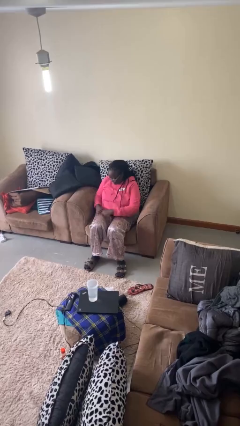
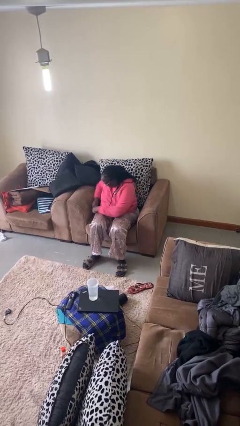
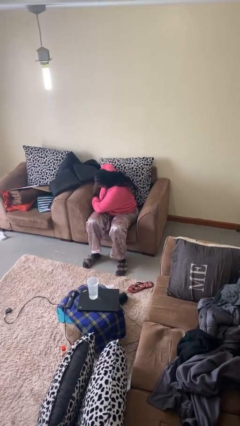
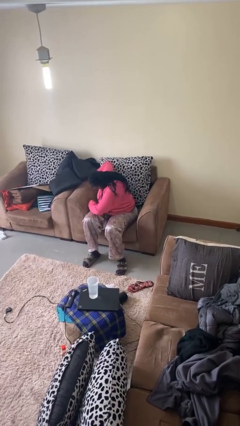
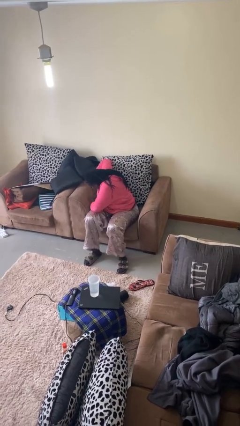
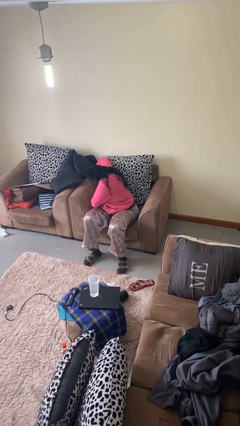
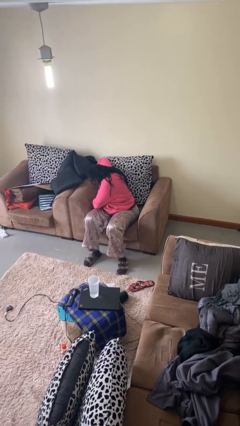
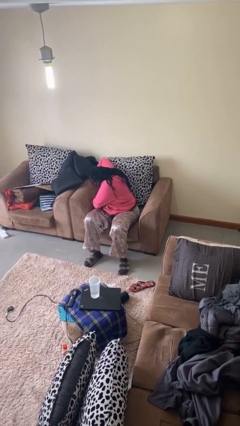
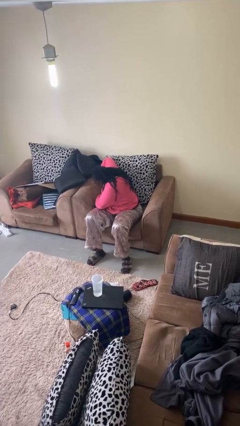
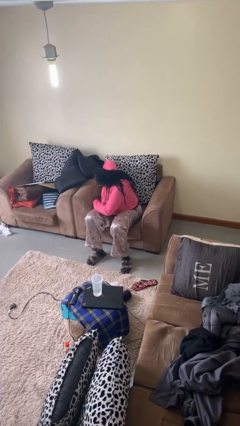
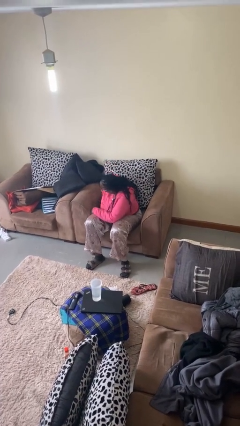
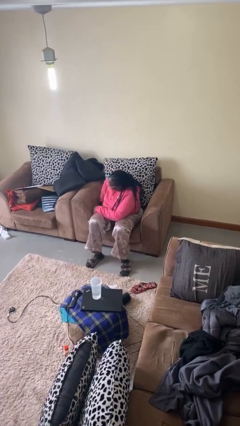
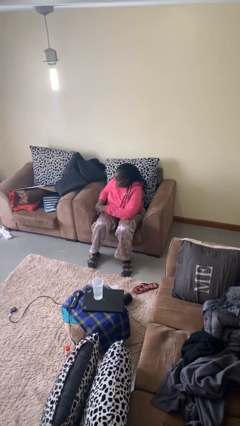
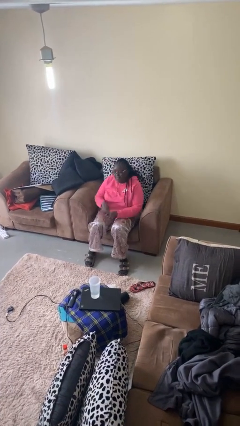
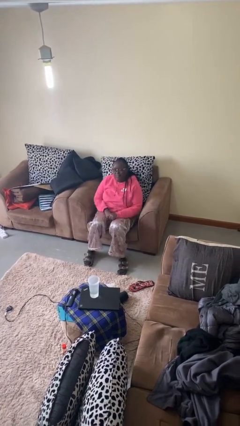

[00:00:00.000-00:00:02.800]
person searches in couch

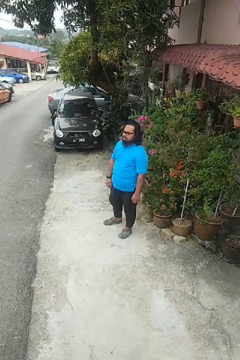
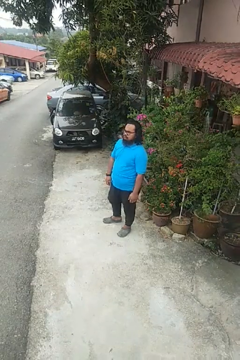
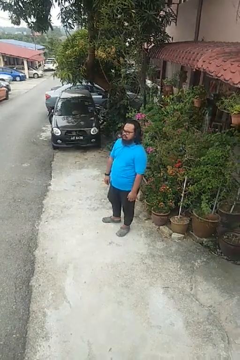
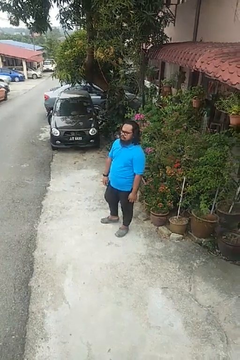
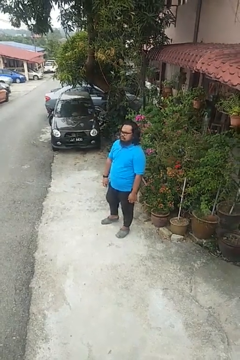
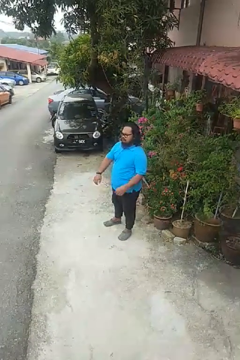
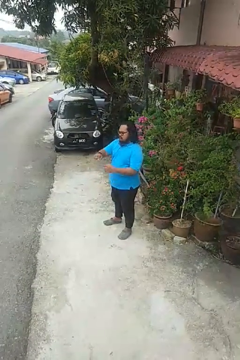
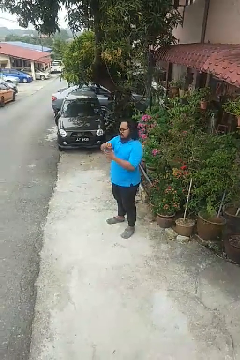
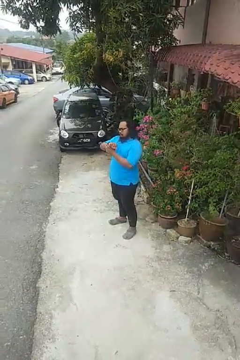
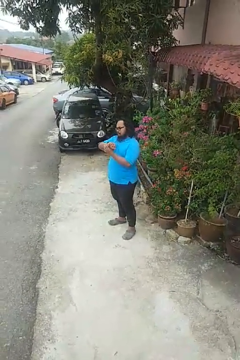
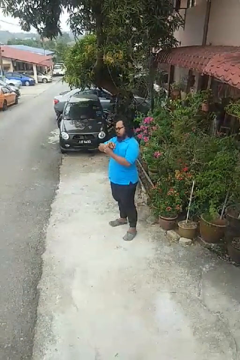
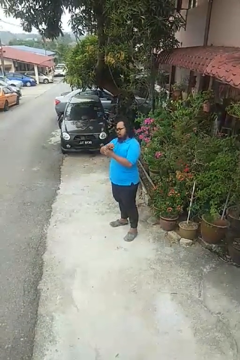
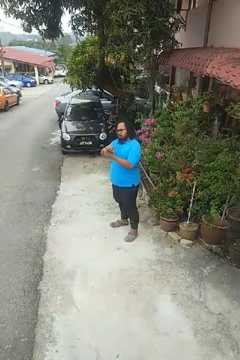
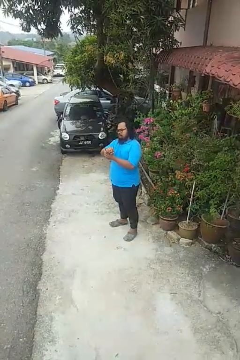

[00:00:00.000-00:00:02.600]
person looks at wristwatch

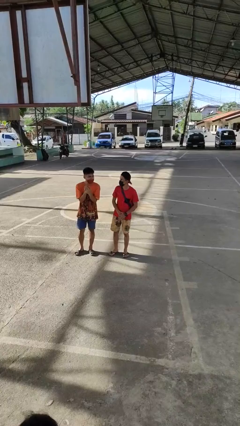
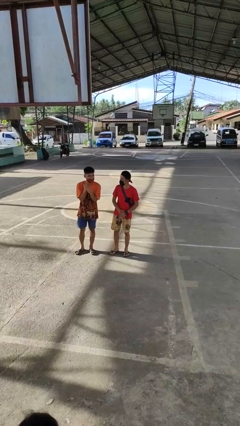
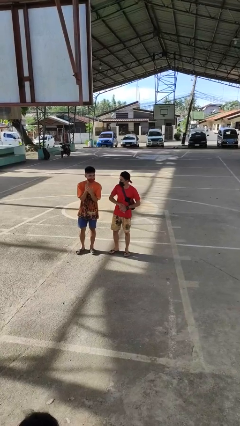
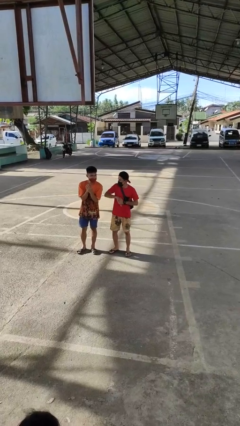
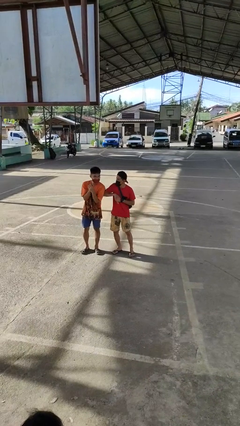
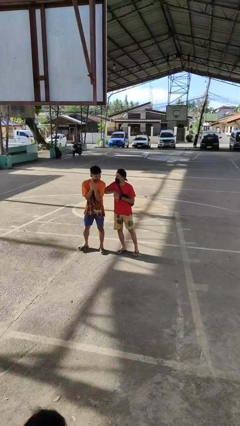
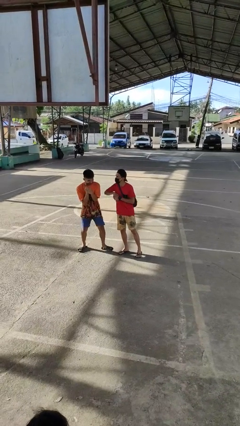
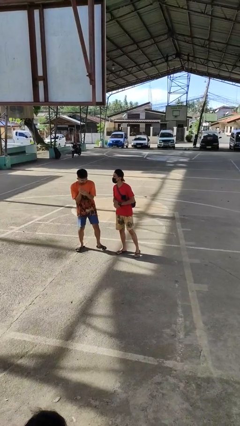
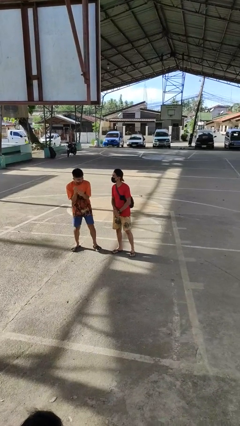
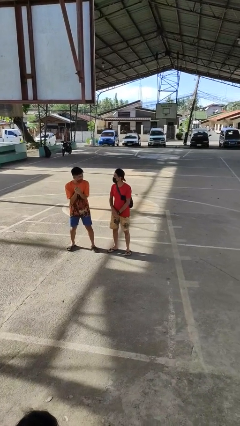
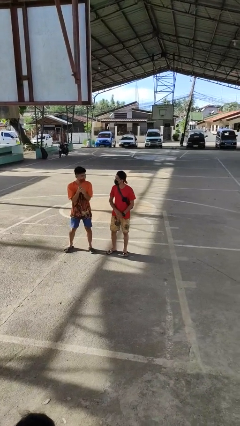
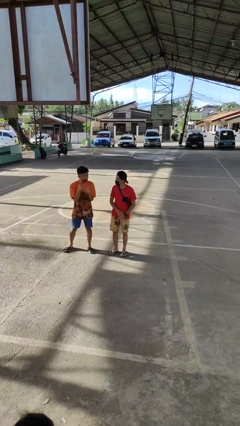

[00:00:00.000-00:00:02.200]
person nudges person with elbow

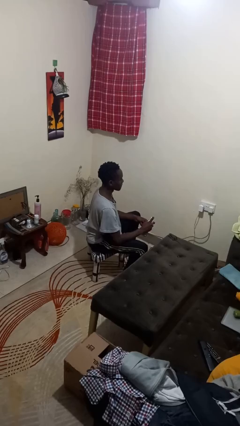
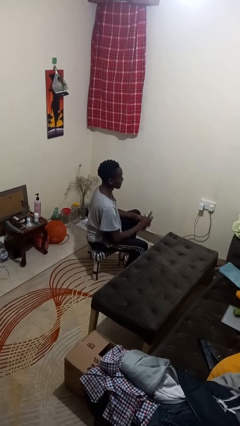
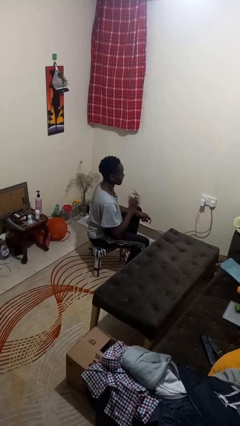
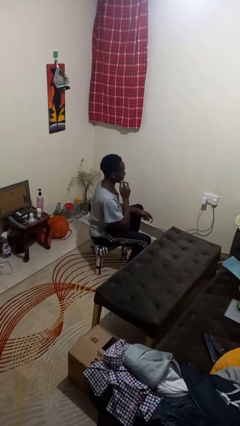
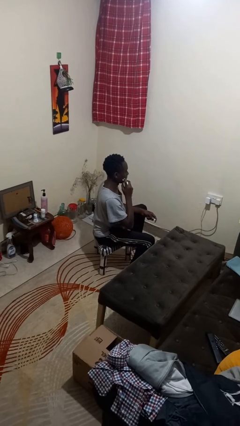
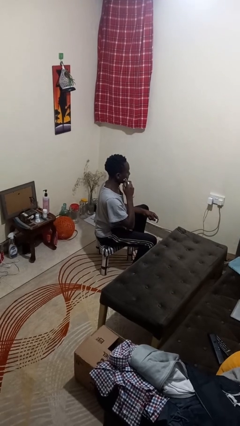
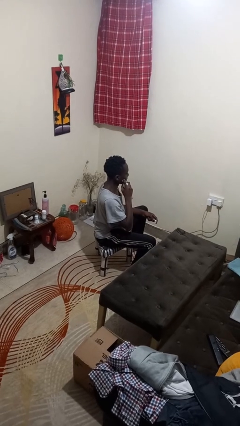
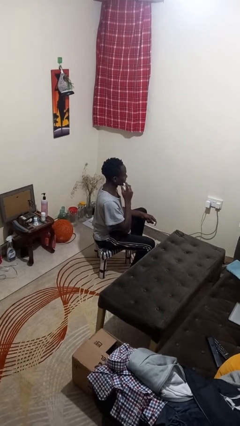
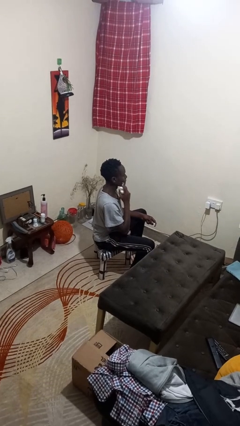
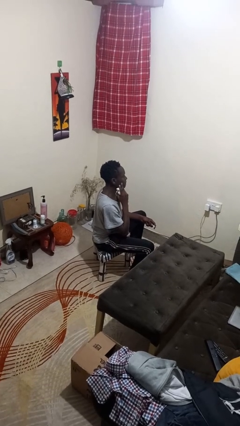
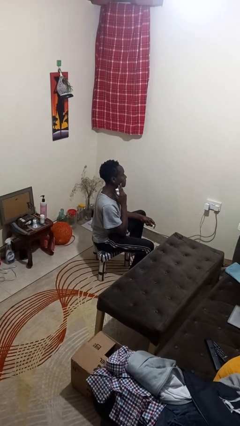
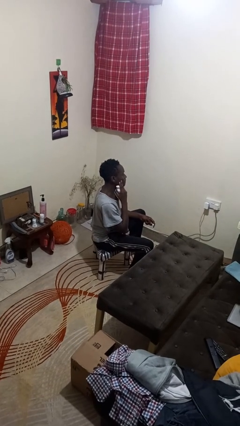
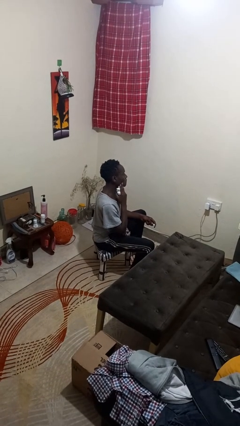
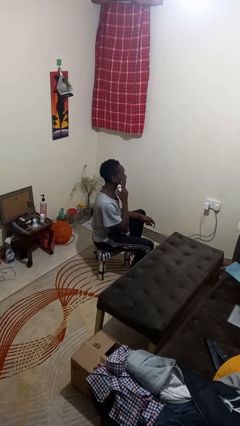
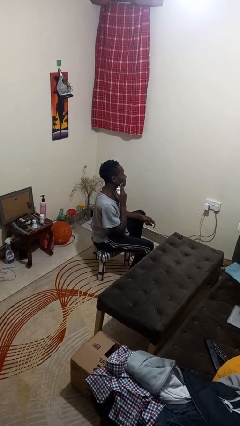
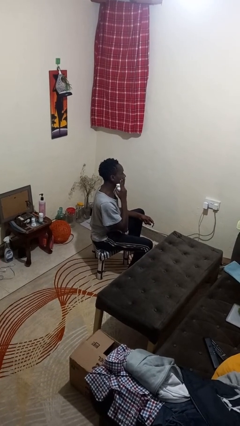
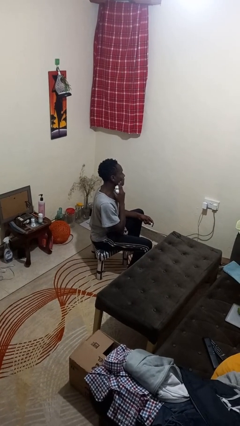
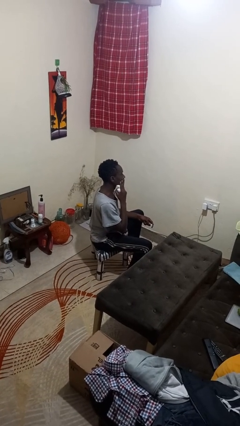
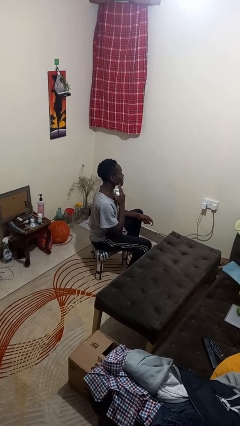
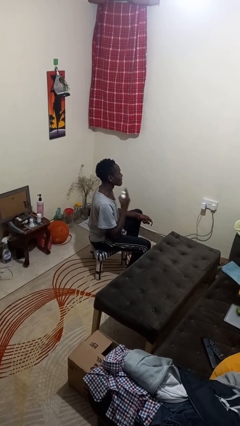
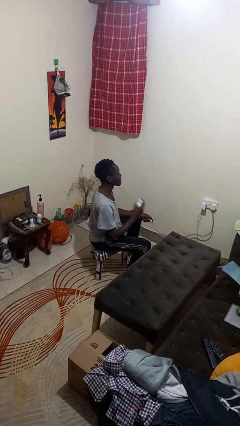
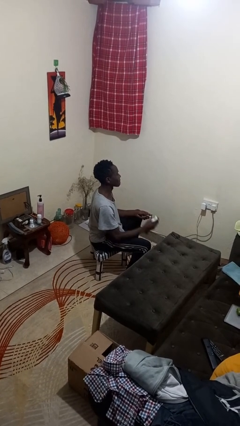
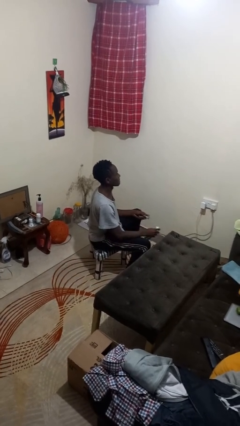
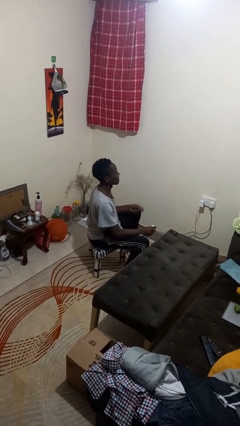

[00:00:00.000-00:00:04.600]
person applies shaving cream

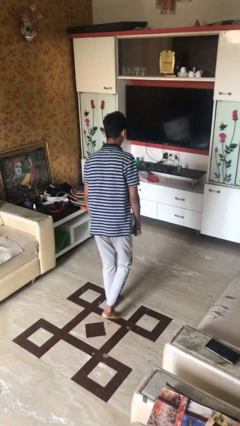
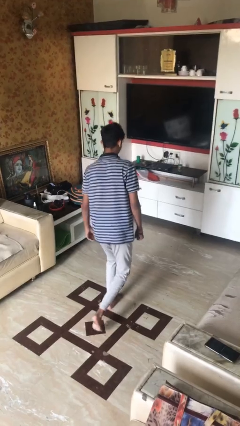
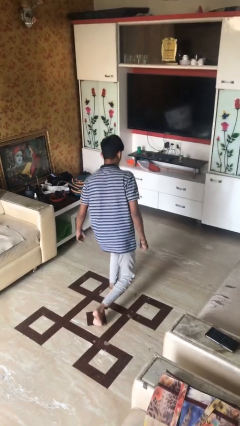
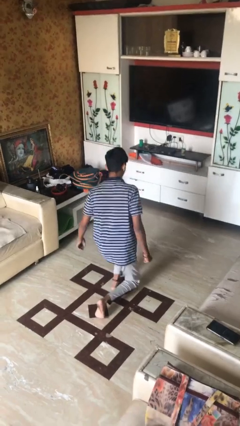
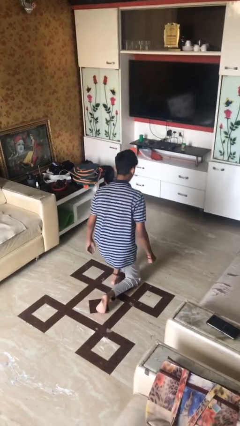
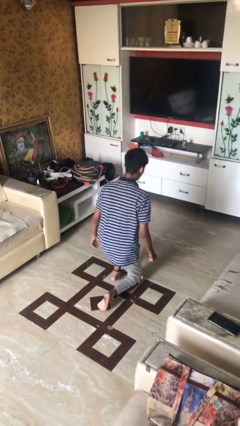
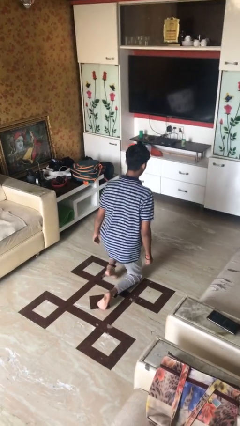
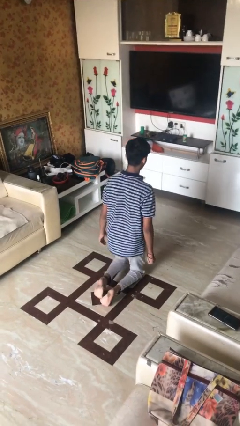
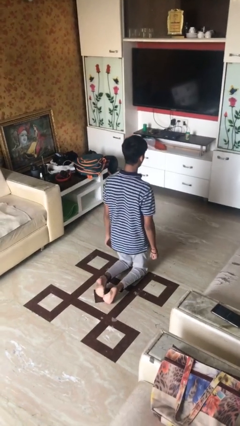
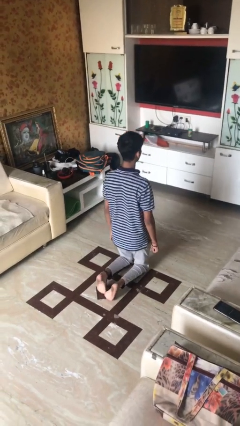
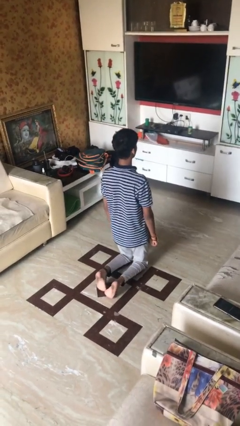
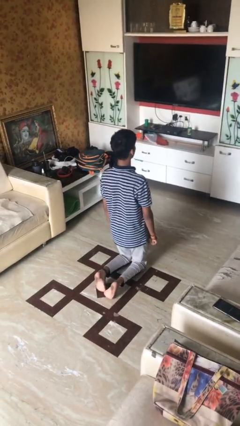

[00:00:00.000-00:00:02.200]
person kneels

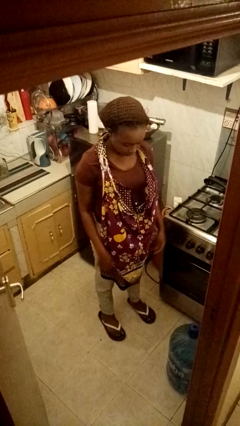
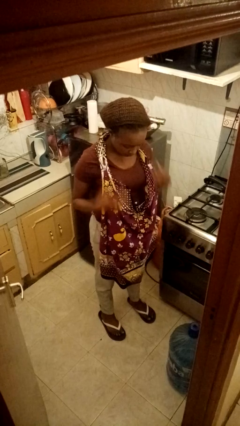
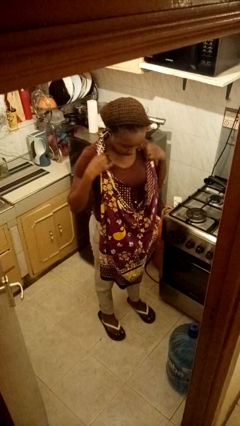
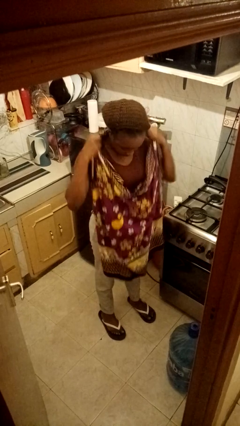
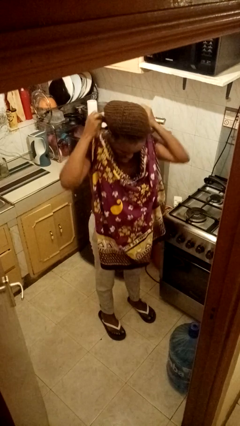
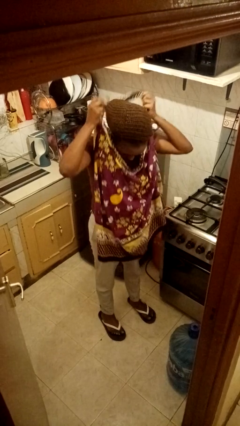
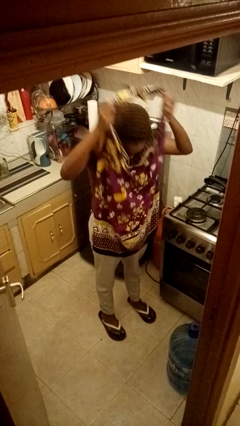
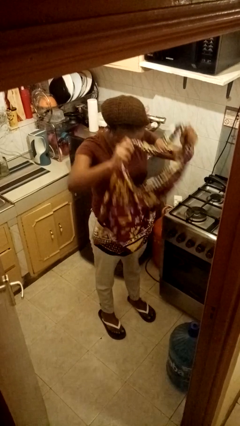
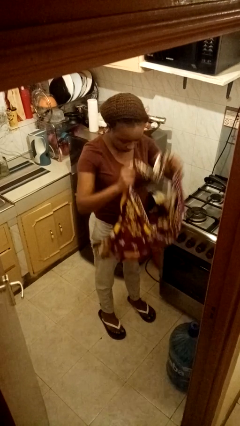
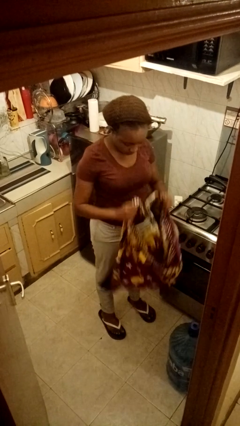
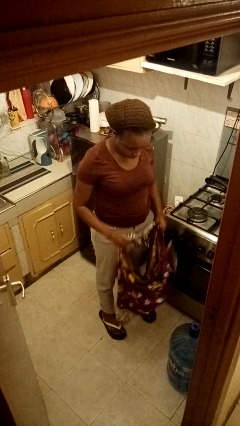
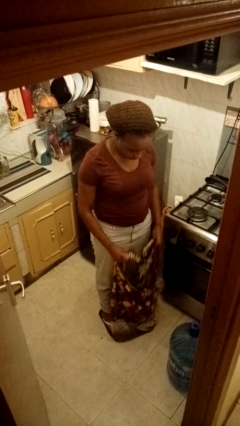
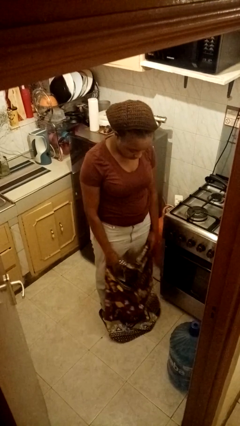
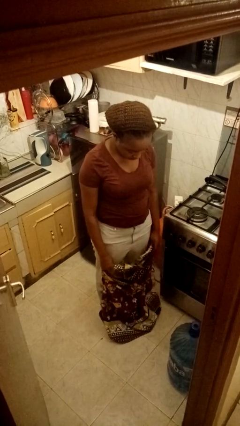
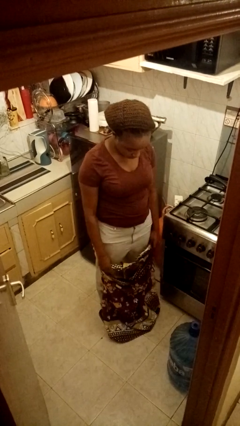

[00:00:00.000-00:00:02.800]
person takes off apron

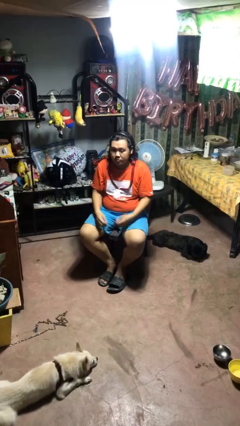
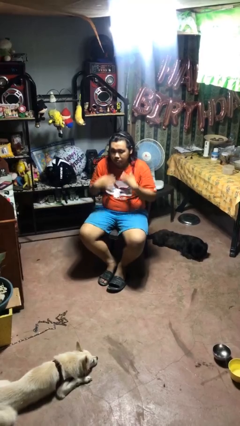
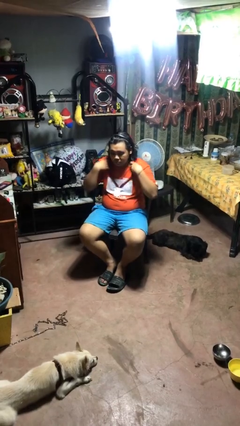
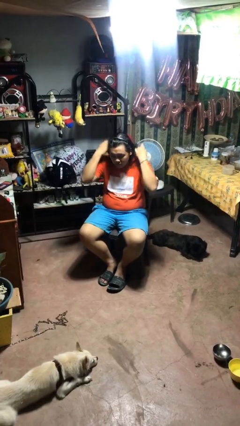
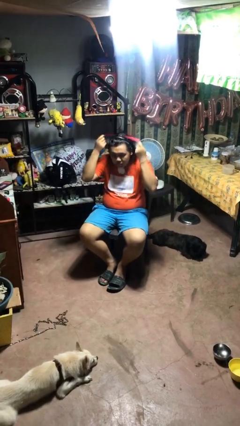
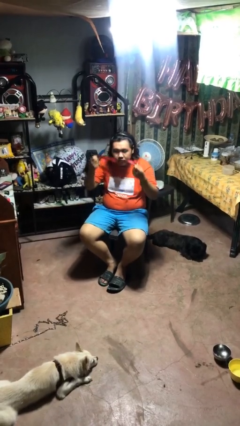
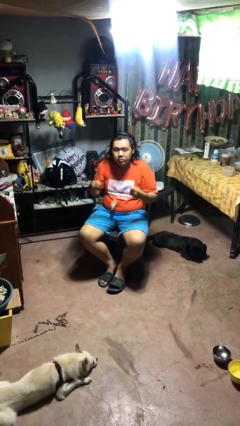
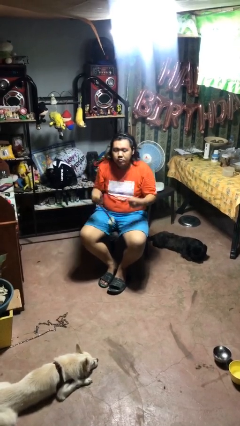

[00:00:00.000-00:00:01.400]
person takes off necklace
